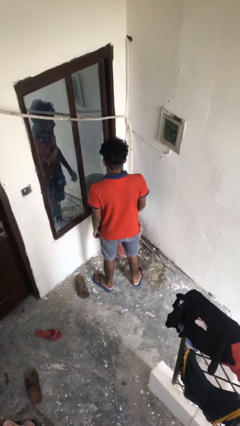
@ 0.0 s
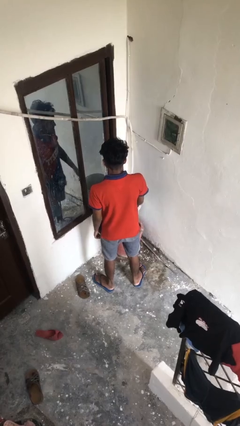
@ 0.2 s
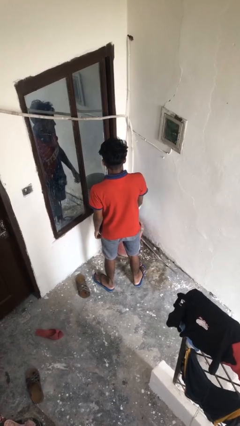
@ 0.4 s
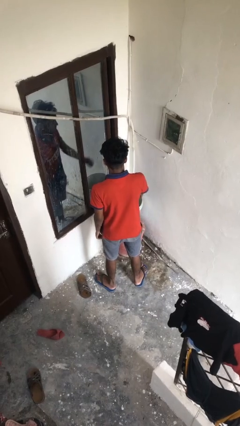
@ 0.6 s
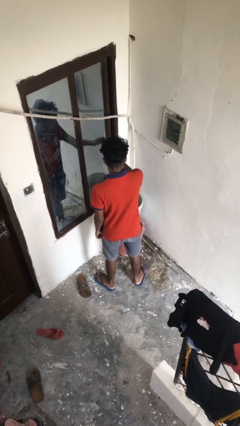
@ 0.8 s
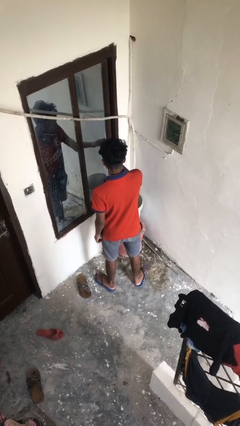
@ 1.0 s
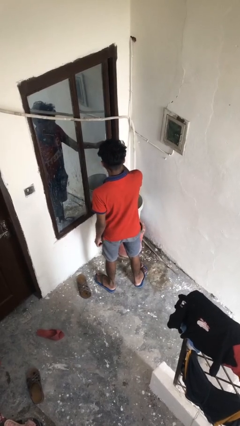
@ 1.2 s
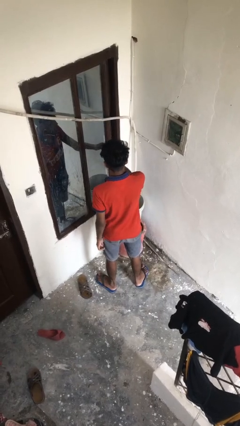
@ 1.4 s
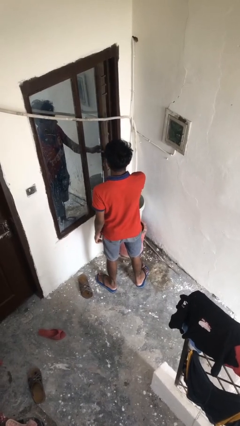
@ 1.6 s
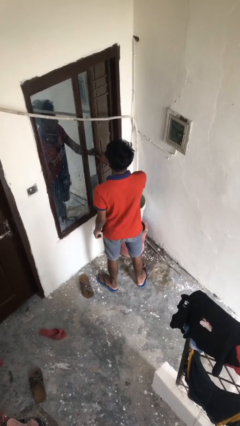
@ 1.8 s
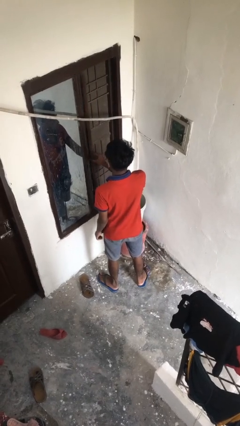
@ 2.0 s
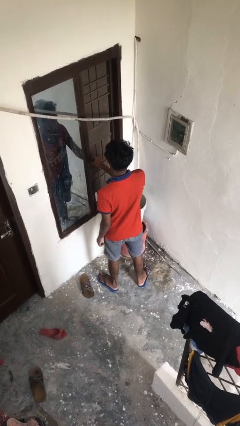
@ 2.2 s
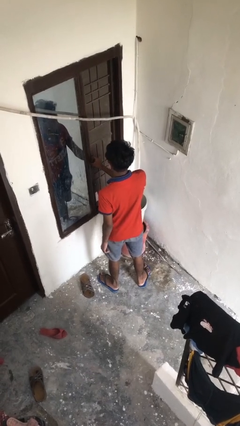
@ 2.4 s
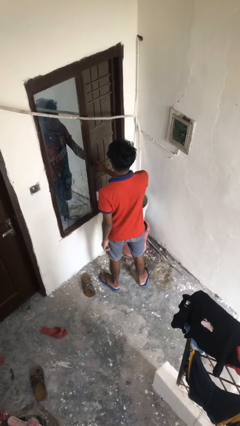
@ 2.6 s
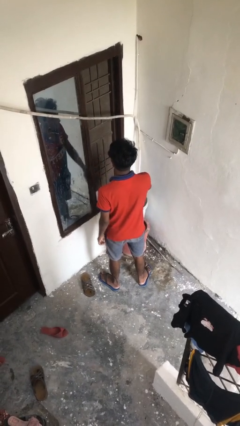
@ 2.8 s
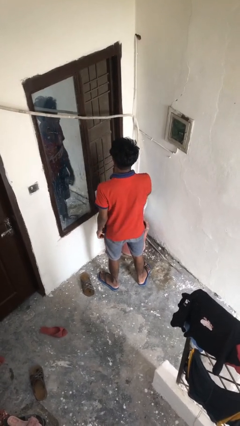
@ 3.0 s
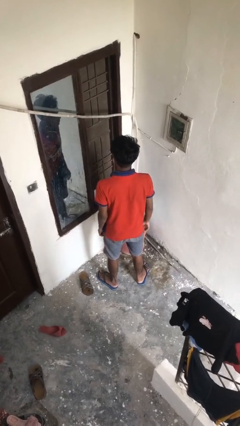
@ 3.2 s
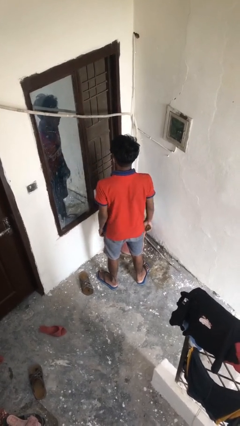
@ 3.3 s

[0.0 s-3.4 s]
person opens home window

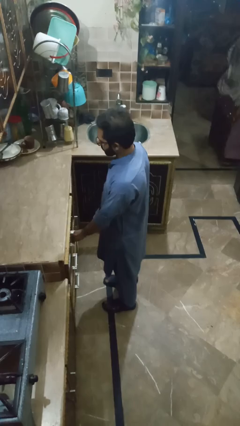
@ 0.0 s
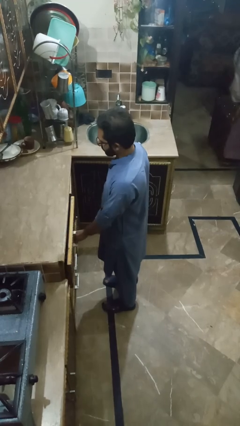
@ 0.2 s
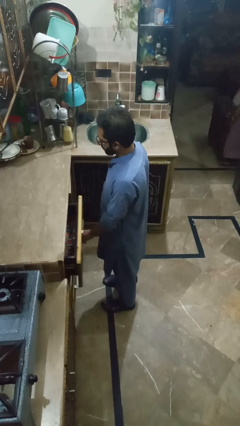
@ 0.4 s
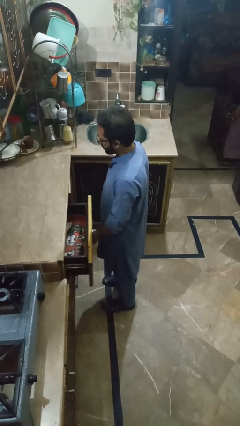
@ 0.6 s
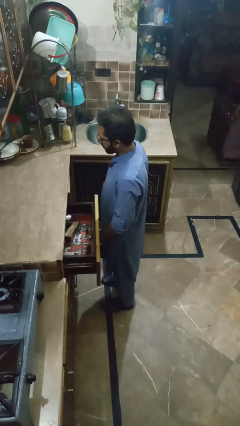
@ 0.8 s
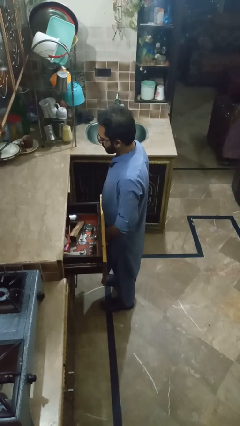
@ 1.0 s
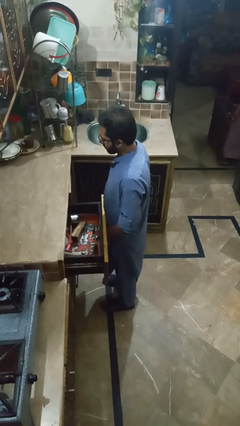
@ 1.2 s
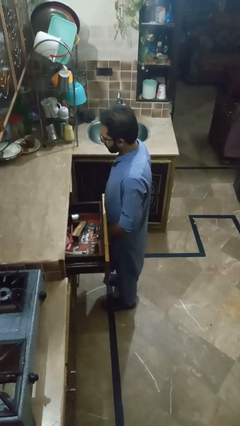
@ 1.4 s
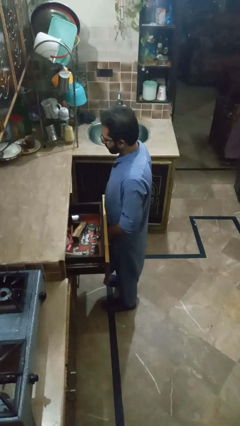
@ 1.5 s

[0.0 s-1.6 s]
person opens kitchen drawer

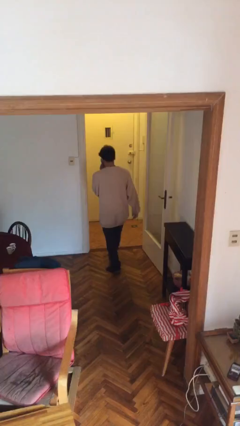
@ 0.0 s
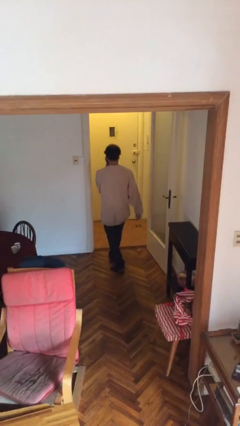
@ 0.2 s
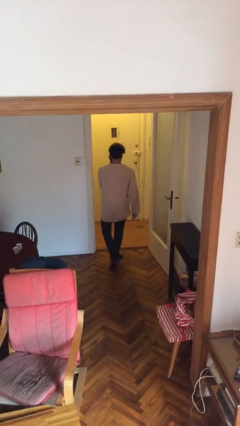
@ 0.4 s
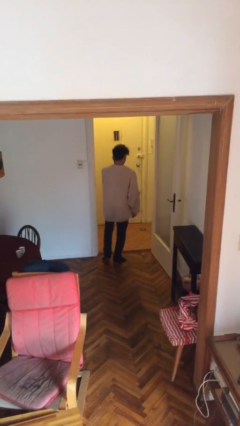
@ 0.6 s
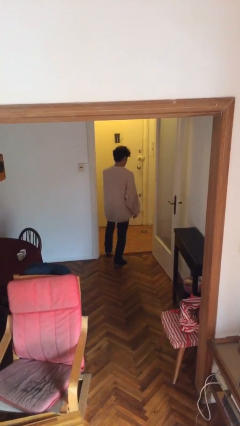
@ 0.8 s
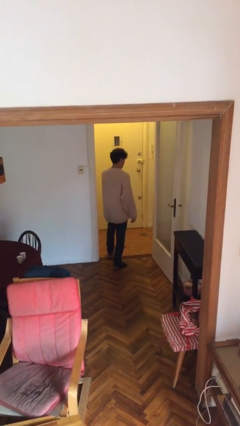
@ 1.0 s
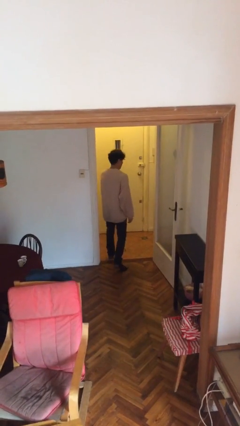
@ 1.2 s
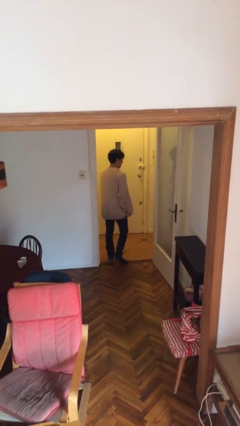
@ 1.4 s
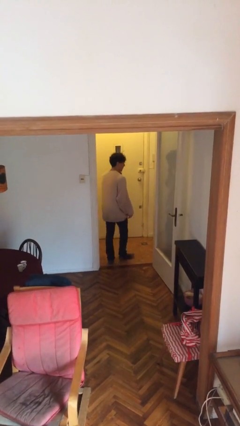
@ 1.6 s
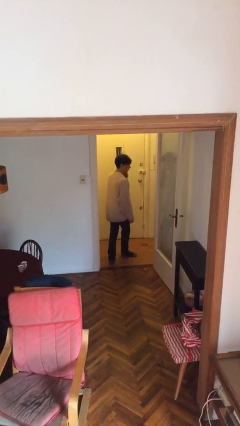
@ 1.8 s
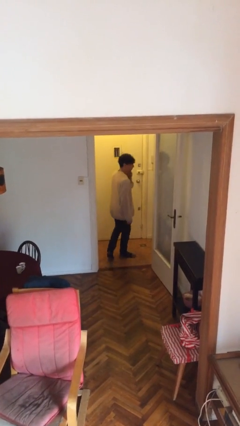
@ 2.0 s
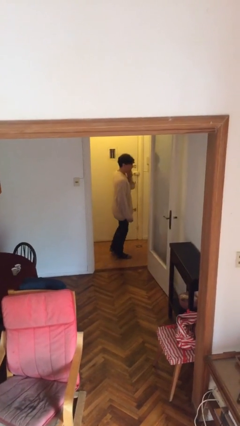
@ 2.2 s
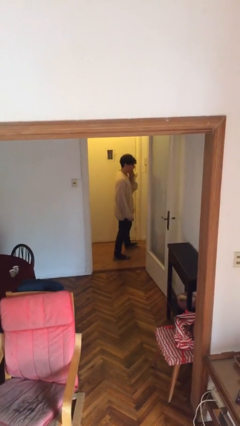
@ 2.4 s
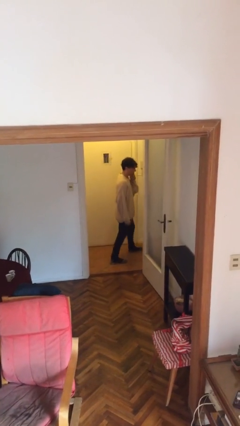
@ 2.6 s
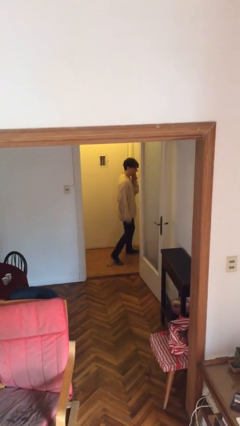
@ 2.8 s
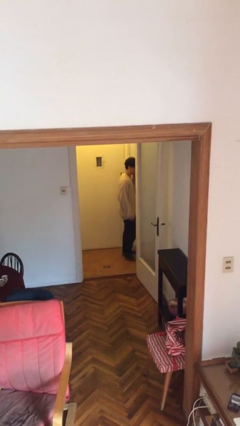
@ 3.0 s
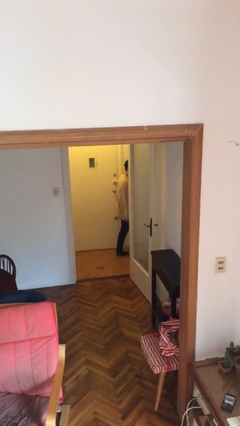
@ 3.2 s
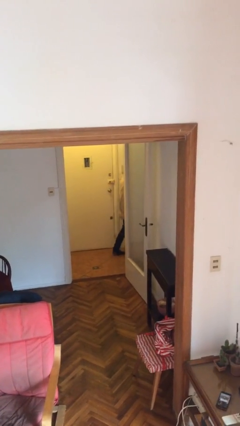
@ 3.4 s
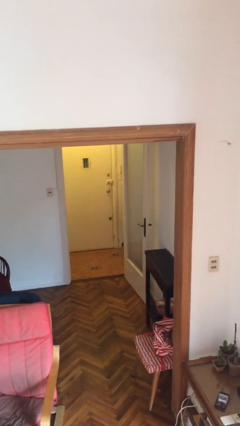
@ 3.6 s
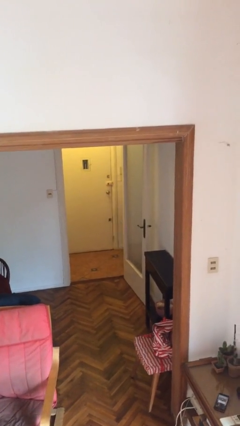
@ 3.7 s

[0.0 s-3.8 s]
person exits scene through structure

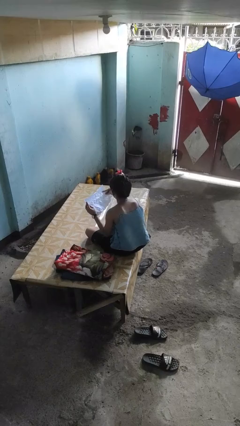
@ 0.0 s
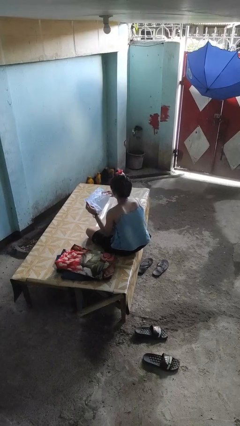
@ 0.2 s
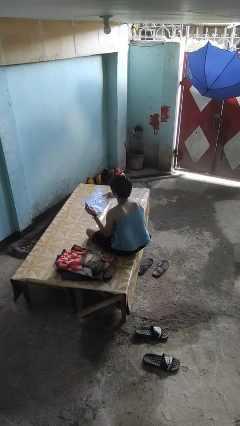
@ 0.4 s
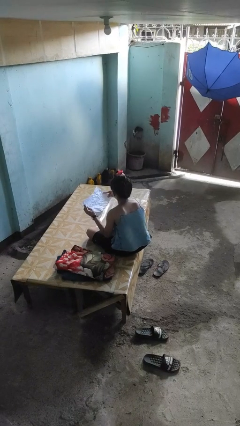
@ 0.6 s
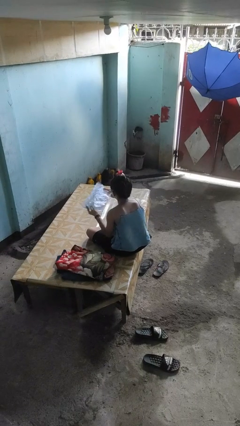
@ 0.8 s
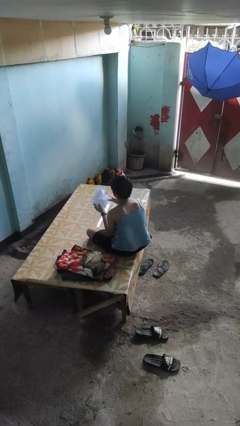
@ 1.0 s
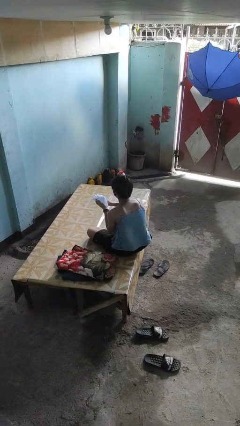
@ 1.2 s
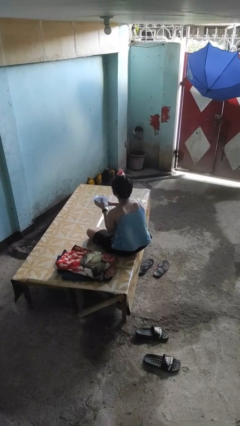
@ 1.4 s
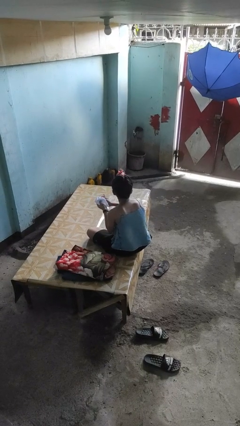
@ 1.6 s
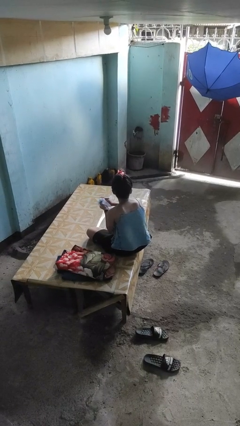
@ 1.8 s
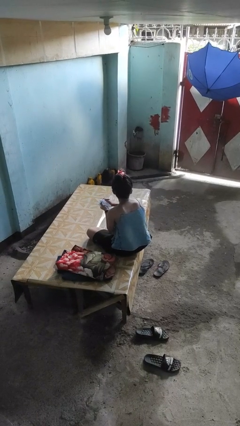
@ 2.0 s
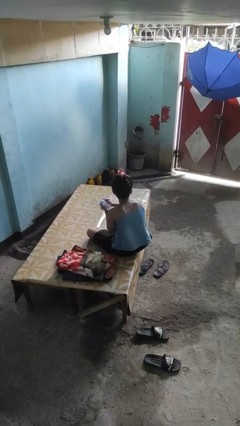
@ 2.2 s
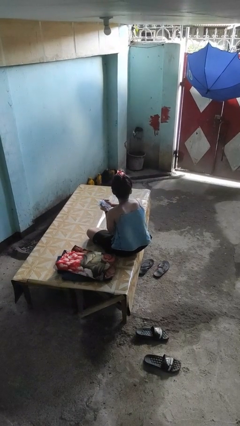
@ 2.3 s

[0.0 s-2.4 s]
person crumples paper

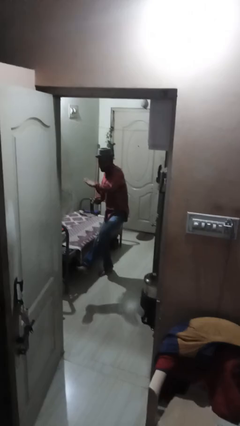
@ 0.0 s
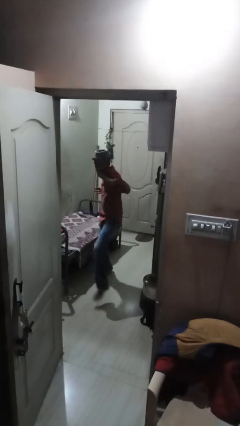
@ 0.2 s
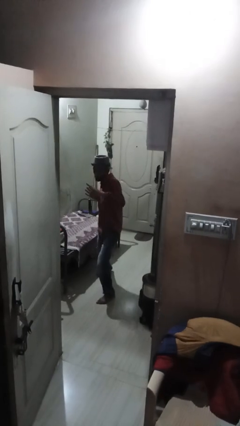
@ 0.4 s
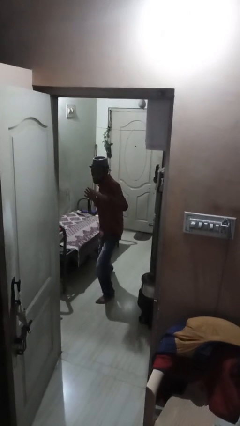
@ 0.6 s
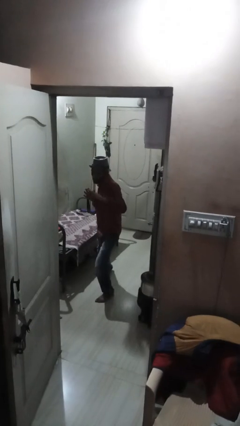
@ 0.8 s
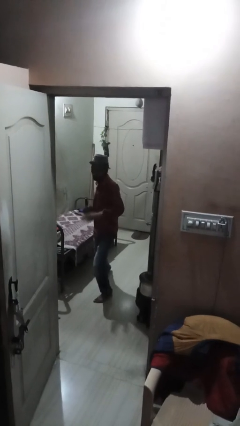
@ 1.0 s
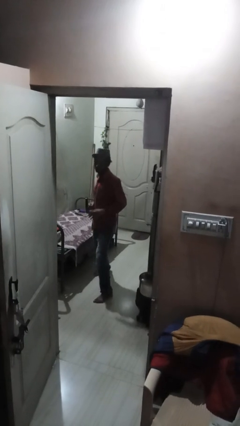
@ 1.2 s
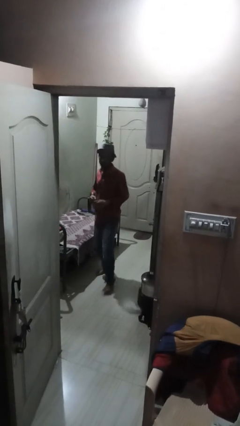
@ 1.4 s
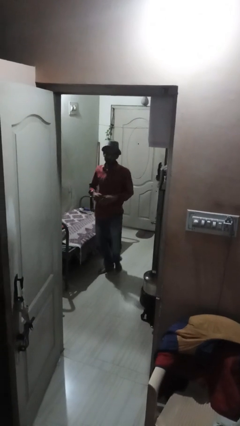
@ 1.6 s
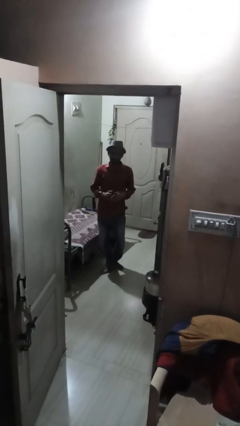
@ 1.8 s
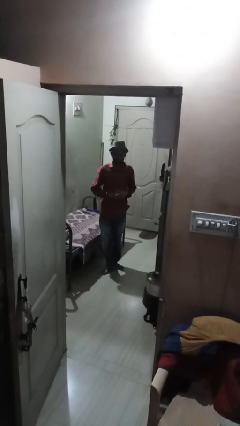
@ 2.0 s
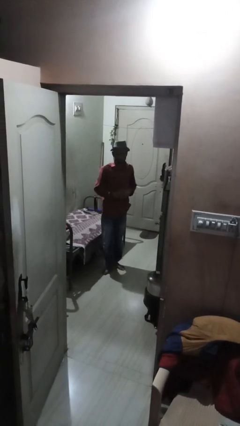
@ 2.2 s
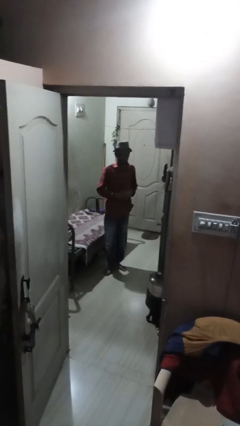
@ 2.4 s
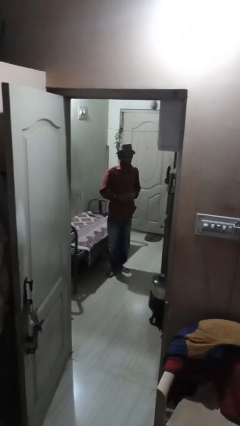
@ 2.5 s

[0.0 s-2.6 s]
person karate chop

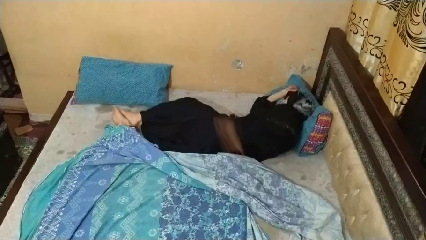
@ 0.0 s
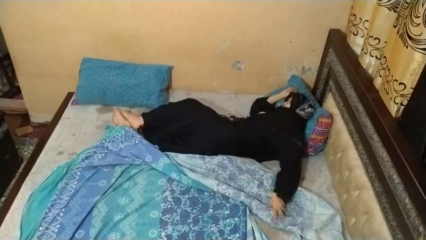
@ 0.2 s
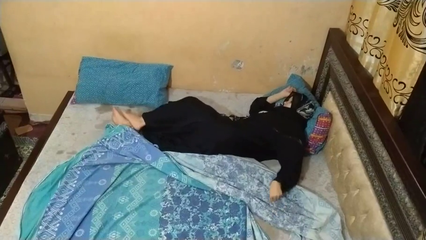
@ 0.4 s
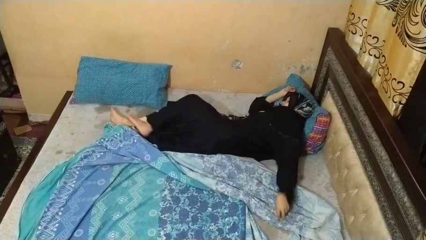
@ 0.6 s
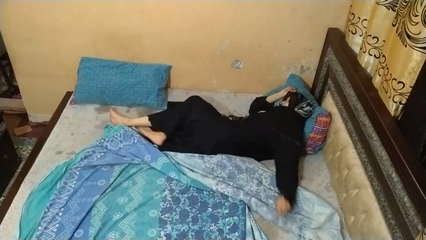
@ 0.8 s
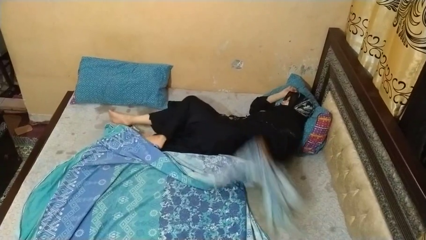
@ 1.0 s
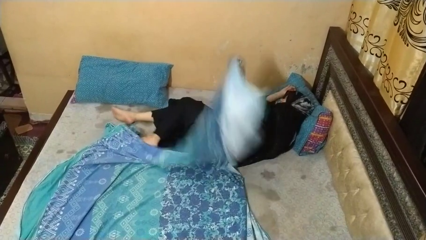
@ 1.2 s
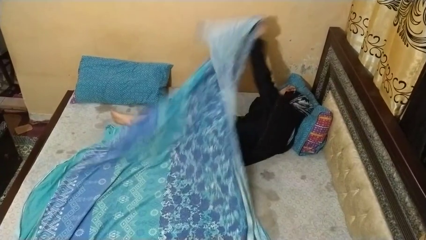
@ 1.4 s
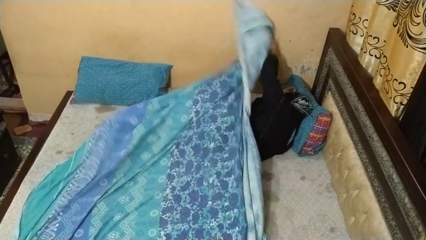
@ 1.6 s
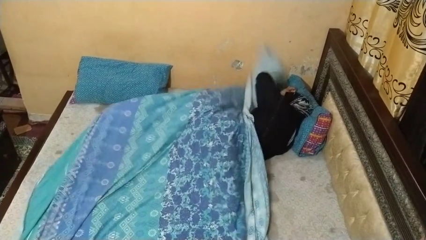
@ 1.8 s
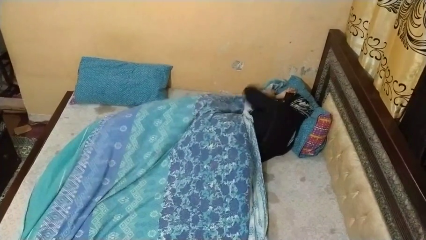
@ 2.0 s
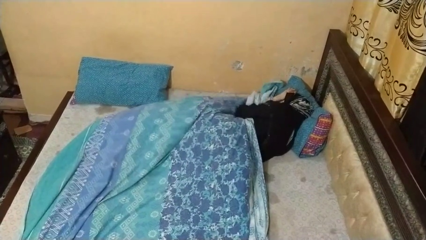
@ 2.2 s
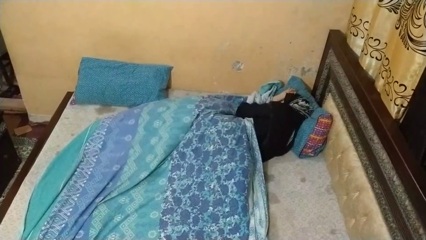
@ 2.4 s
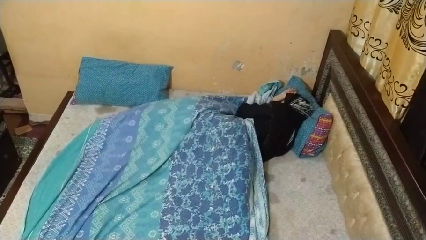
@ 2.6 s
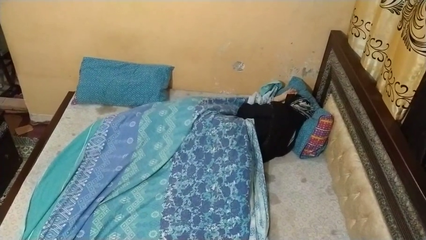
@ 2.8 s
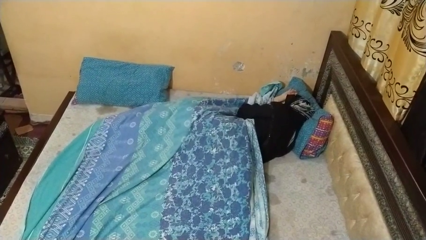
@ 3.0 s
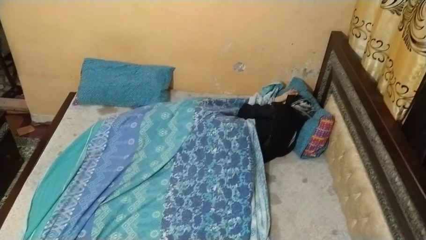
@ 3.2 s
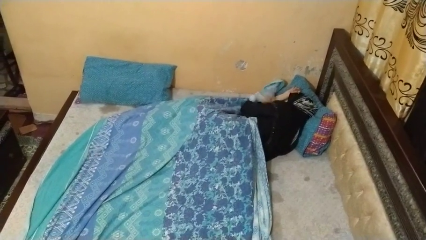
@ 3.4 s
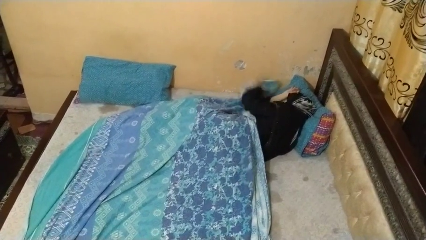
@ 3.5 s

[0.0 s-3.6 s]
person covers with bedsheets
